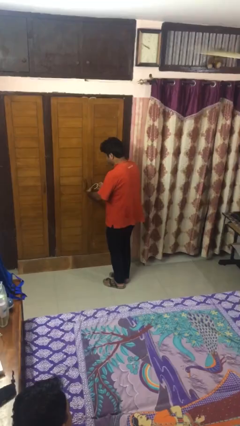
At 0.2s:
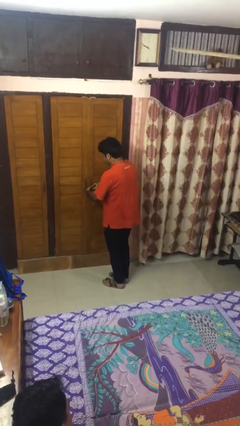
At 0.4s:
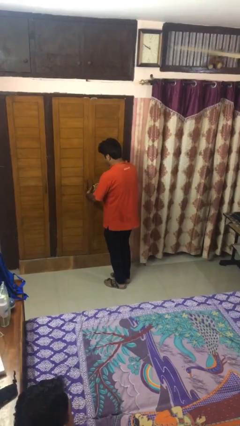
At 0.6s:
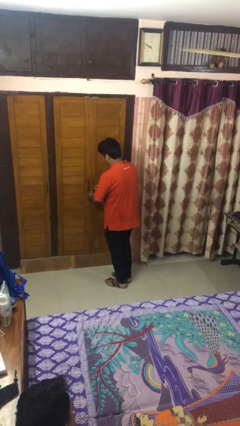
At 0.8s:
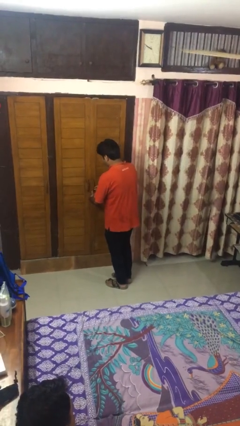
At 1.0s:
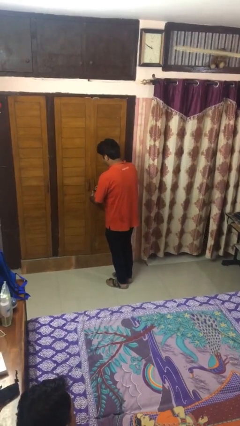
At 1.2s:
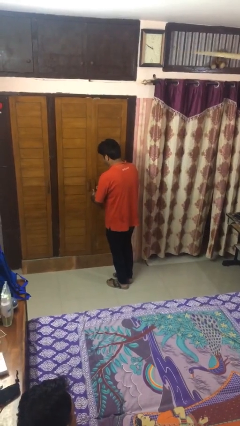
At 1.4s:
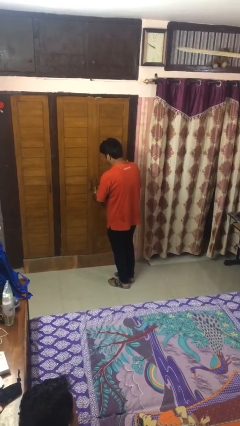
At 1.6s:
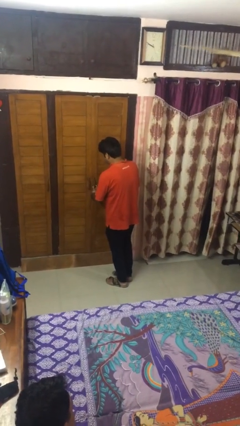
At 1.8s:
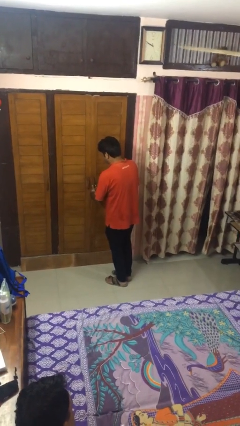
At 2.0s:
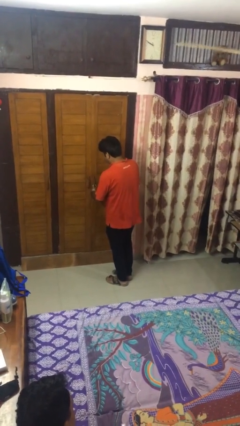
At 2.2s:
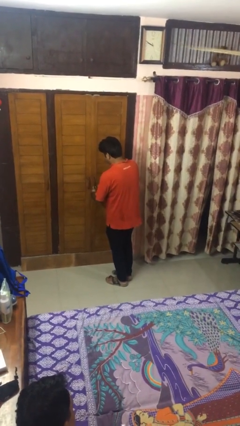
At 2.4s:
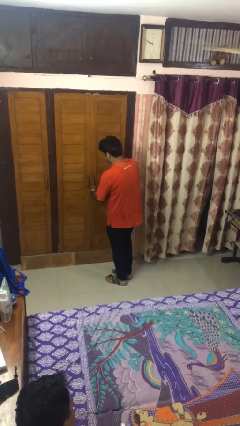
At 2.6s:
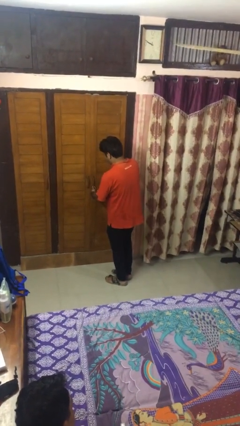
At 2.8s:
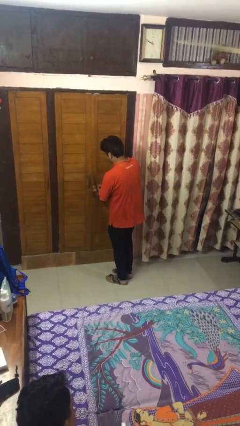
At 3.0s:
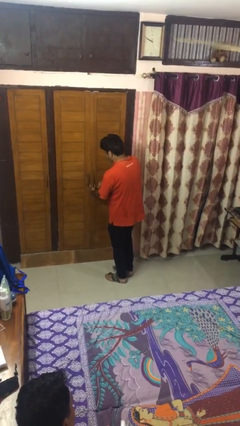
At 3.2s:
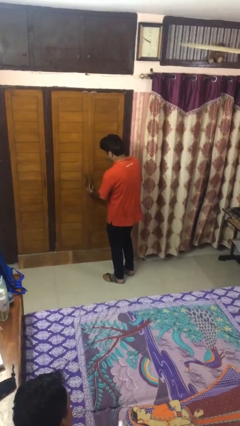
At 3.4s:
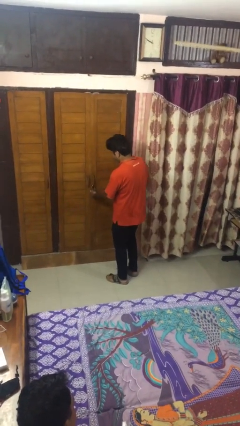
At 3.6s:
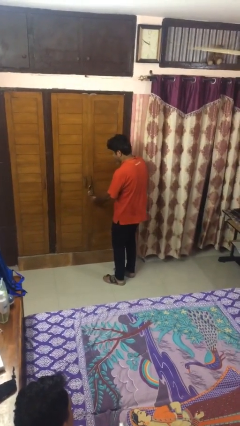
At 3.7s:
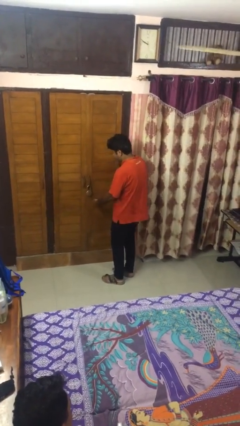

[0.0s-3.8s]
person locks door with keys

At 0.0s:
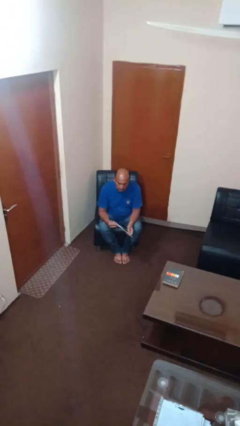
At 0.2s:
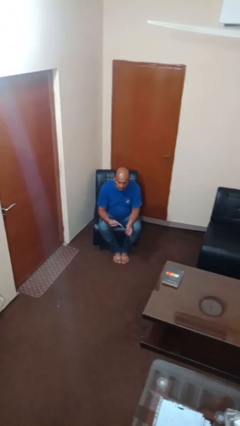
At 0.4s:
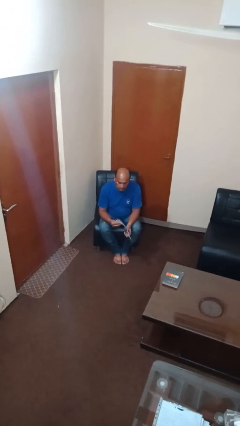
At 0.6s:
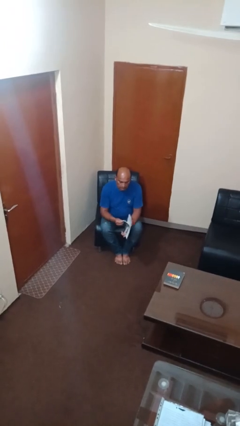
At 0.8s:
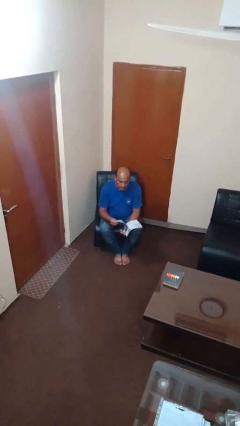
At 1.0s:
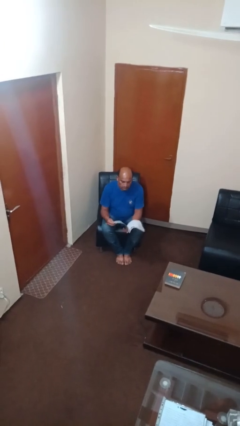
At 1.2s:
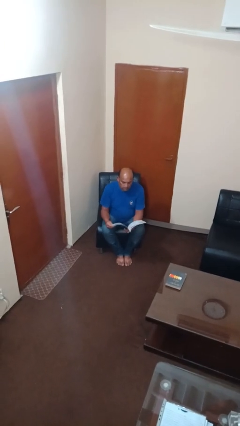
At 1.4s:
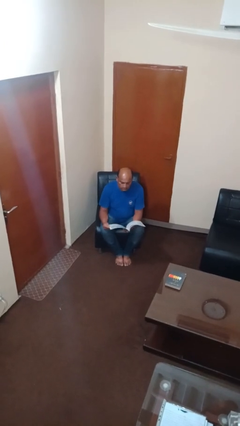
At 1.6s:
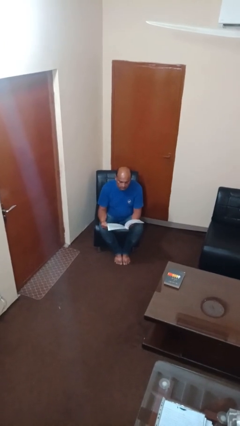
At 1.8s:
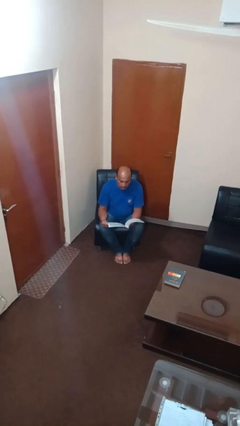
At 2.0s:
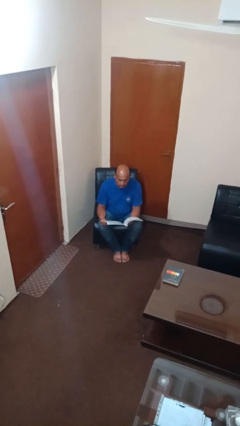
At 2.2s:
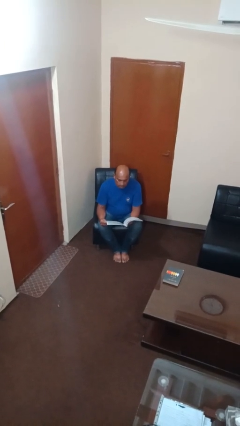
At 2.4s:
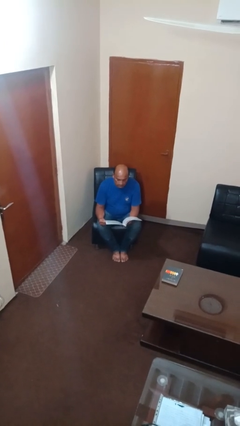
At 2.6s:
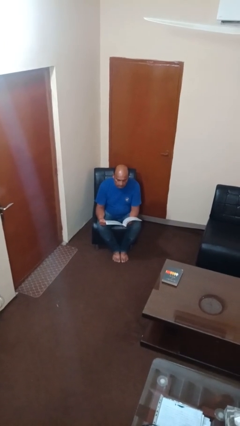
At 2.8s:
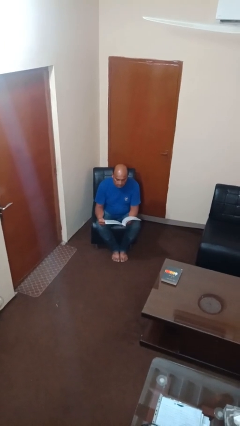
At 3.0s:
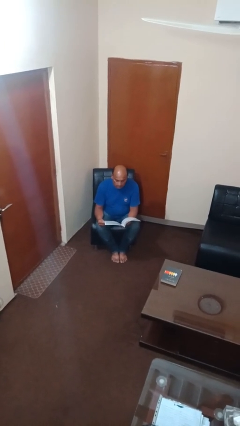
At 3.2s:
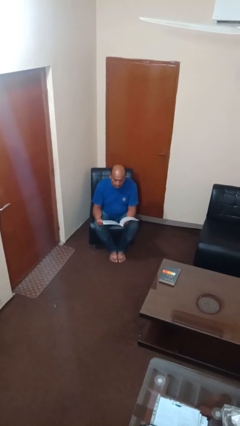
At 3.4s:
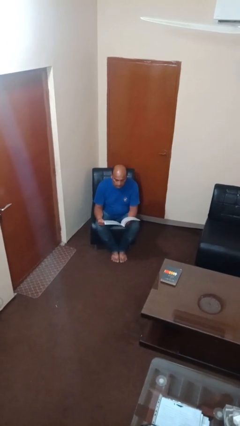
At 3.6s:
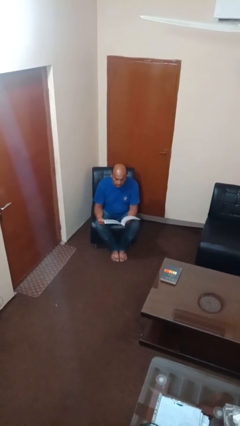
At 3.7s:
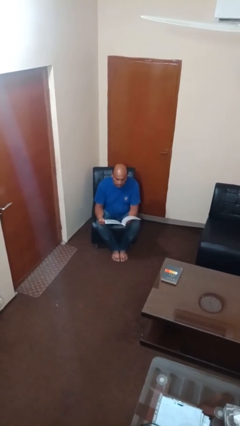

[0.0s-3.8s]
person reads magazine

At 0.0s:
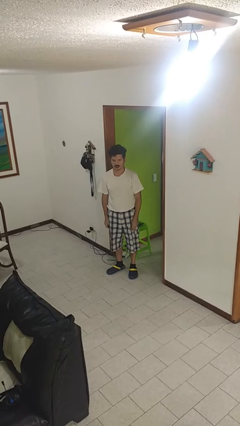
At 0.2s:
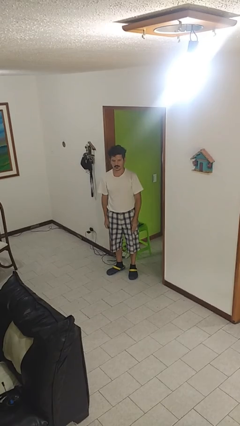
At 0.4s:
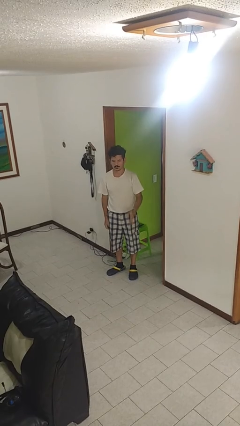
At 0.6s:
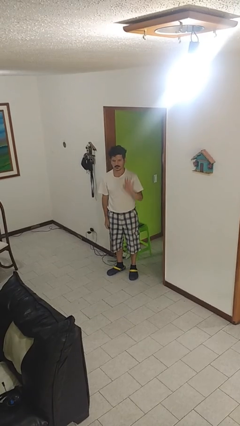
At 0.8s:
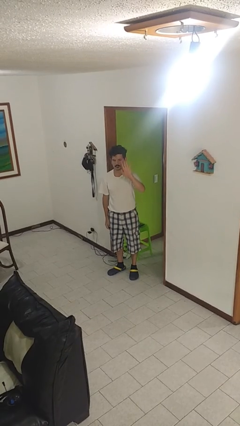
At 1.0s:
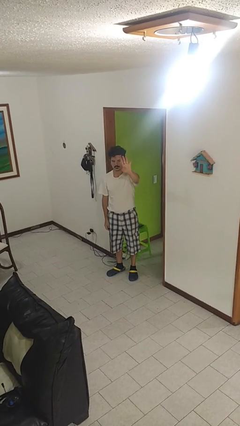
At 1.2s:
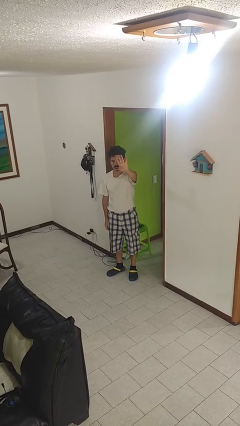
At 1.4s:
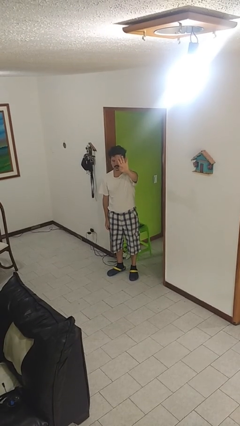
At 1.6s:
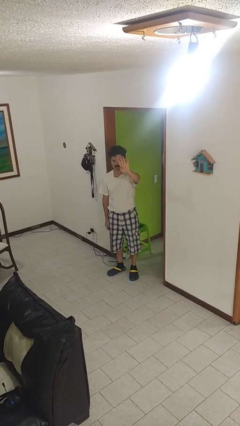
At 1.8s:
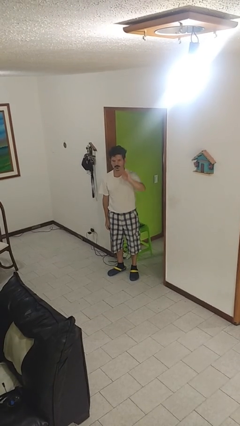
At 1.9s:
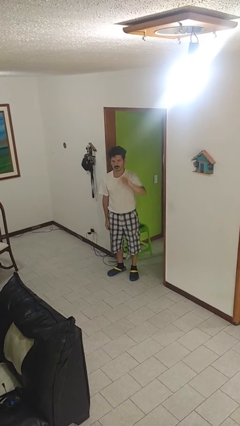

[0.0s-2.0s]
person gestures number four

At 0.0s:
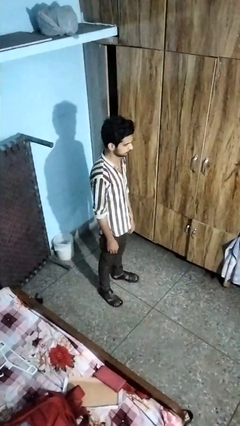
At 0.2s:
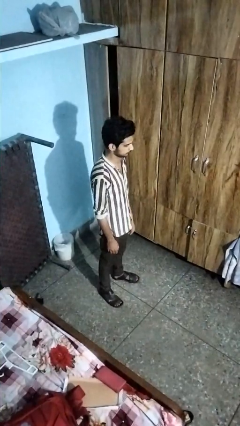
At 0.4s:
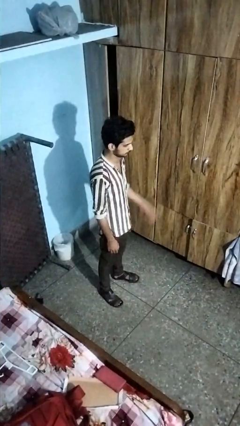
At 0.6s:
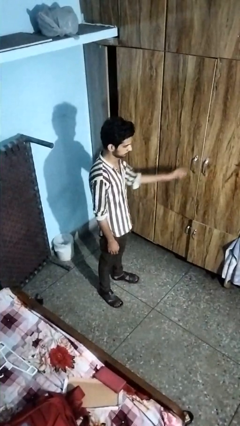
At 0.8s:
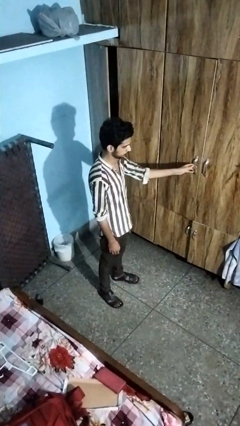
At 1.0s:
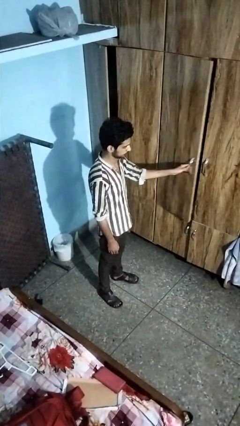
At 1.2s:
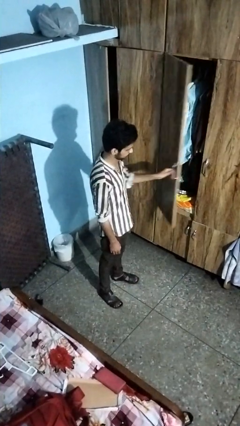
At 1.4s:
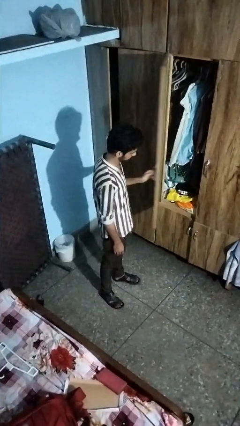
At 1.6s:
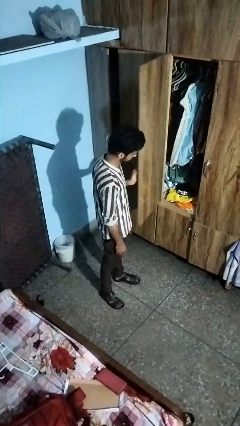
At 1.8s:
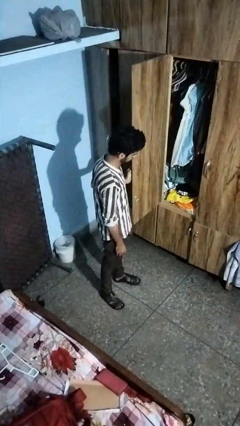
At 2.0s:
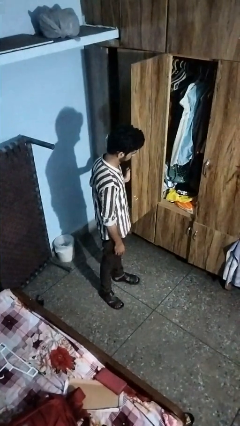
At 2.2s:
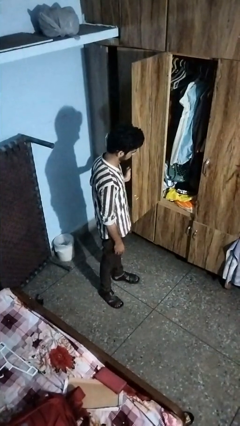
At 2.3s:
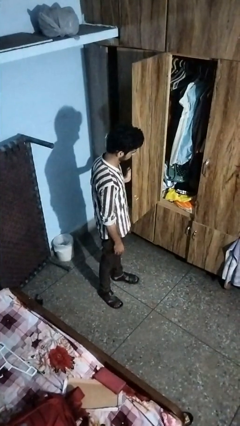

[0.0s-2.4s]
person opens closet door

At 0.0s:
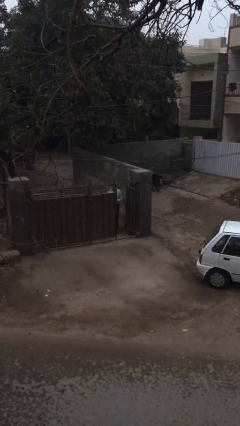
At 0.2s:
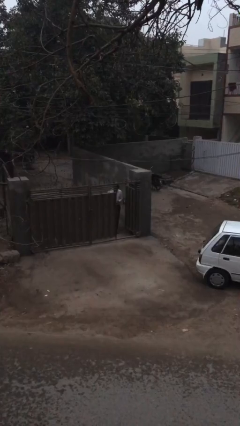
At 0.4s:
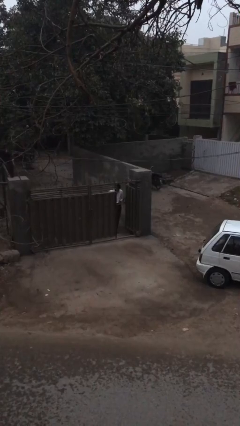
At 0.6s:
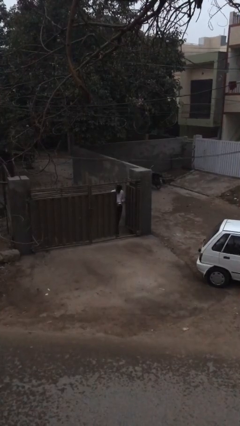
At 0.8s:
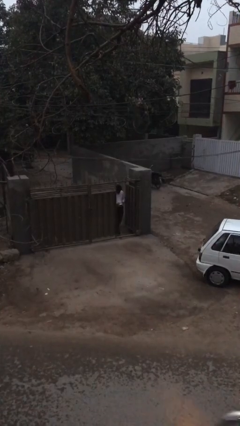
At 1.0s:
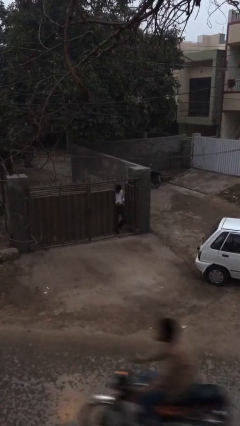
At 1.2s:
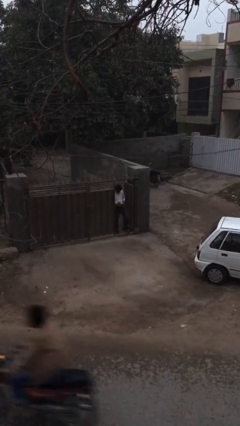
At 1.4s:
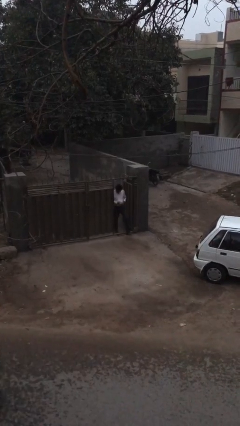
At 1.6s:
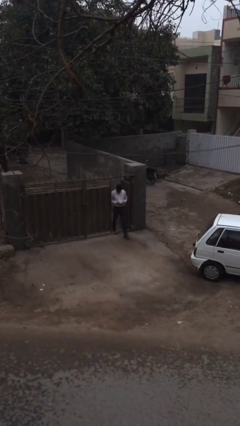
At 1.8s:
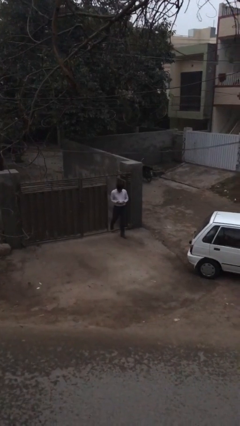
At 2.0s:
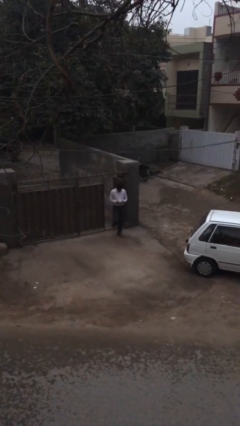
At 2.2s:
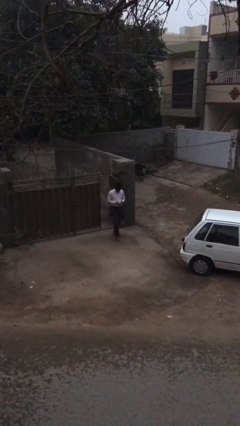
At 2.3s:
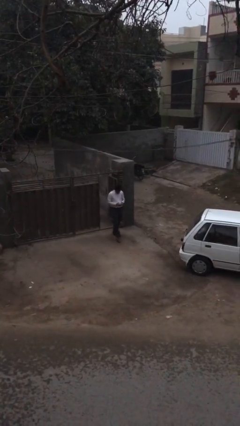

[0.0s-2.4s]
person enters scene through structure

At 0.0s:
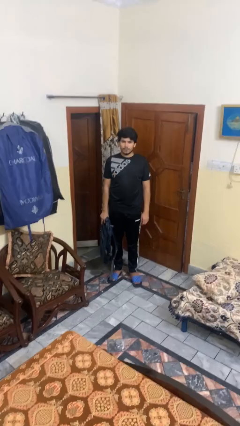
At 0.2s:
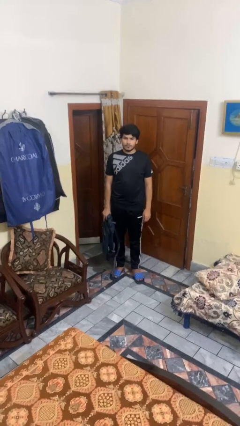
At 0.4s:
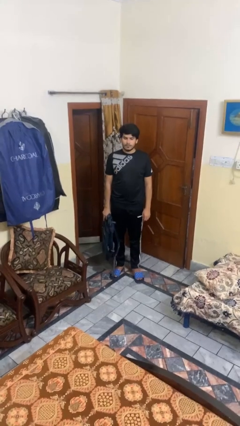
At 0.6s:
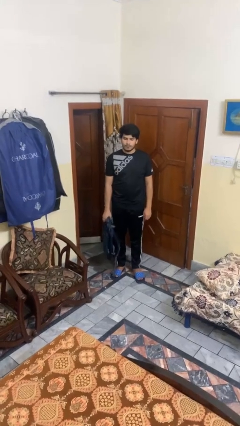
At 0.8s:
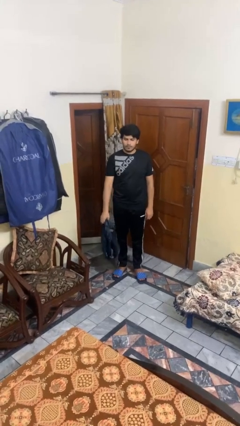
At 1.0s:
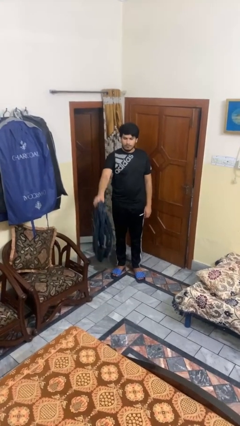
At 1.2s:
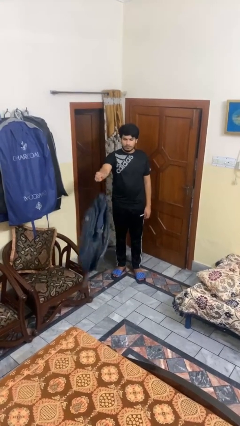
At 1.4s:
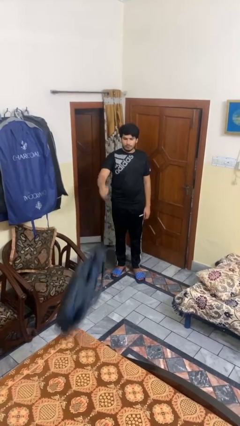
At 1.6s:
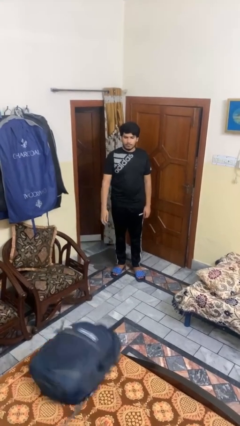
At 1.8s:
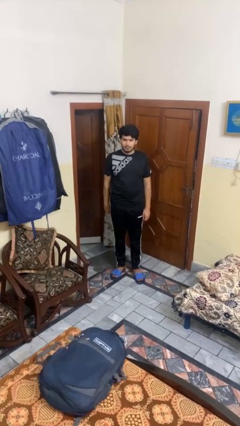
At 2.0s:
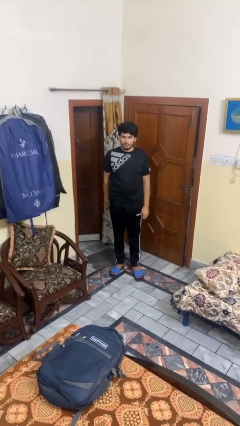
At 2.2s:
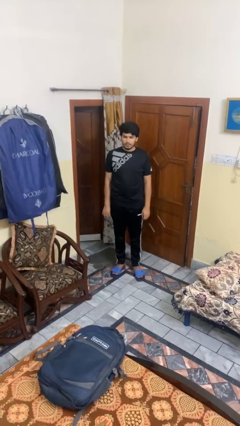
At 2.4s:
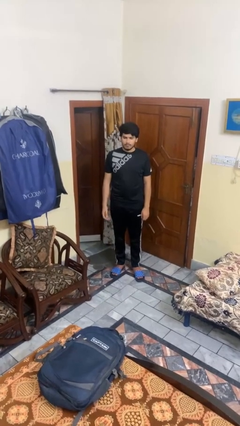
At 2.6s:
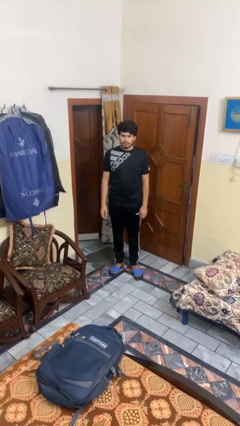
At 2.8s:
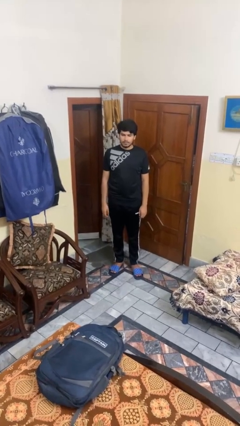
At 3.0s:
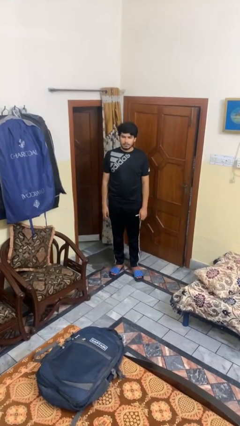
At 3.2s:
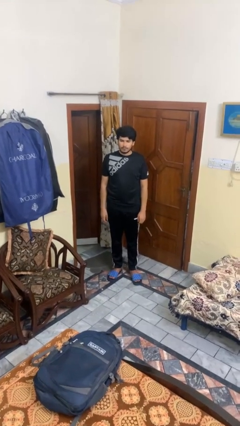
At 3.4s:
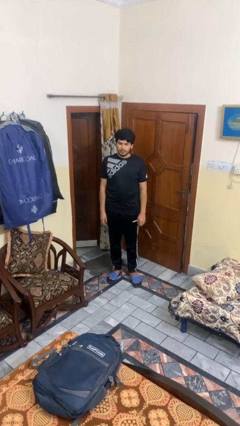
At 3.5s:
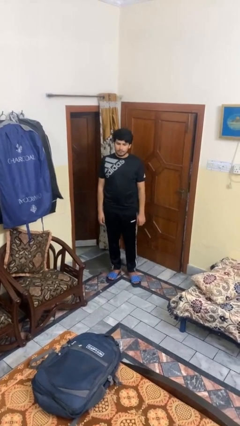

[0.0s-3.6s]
person throws object on bed
